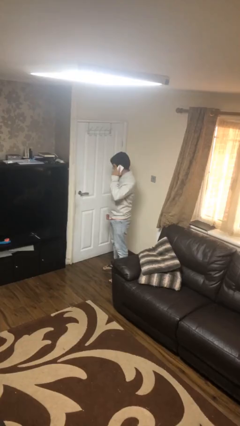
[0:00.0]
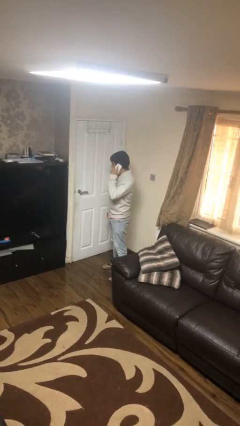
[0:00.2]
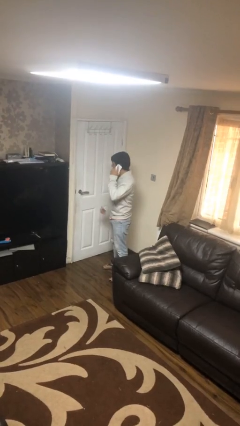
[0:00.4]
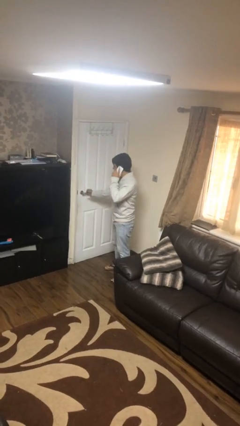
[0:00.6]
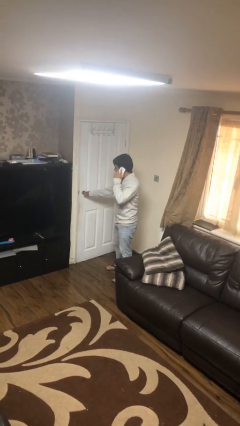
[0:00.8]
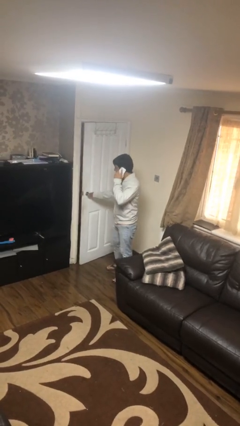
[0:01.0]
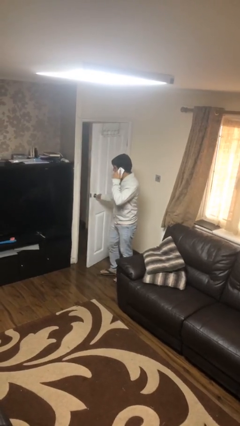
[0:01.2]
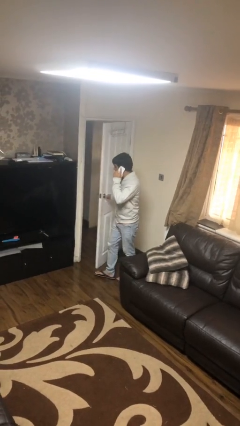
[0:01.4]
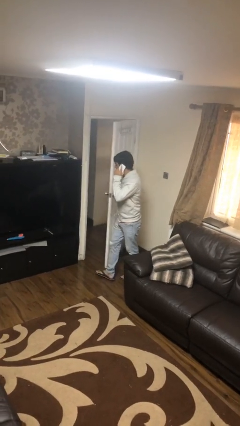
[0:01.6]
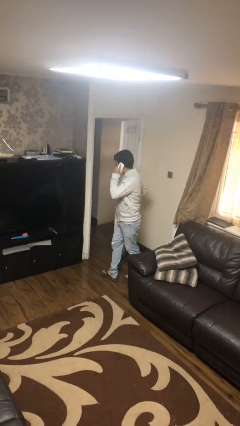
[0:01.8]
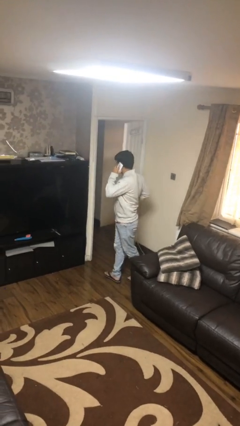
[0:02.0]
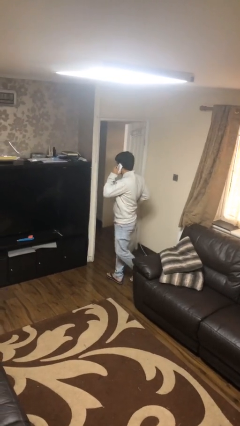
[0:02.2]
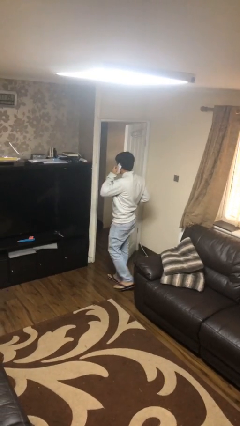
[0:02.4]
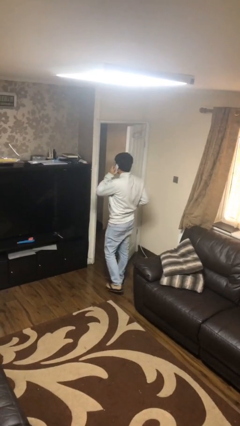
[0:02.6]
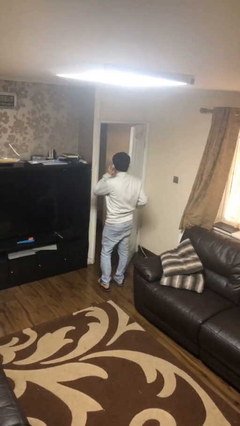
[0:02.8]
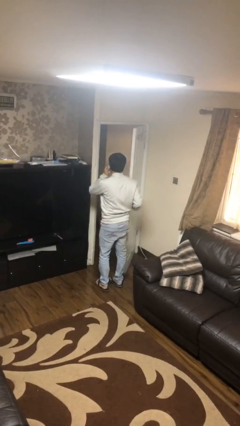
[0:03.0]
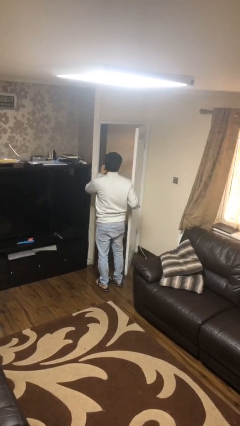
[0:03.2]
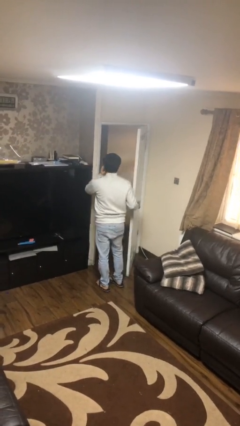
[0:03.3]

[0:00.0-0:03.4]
person opens facility door

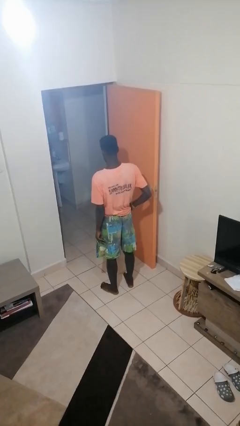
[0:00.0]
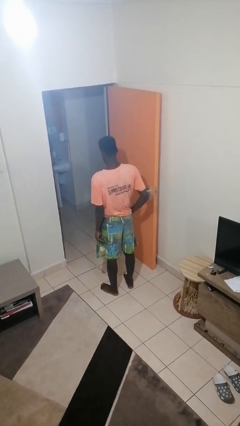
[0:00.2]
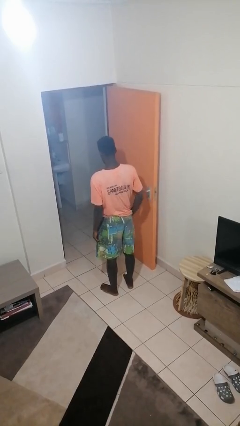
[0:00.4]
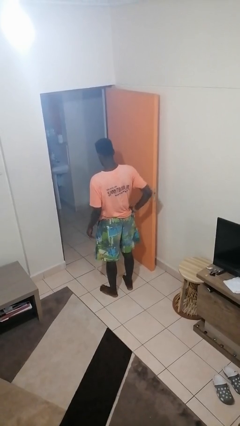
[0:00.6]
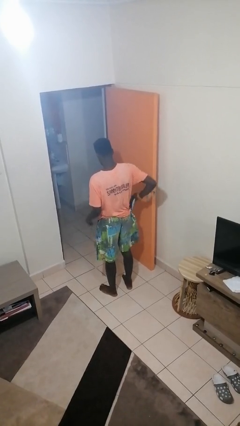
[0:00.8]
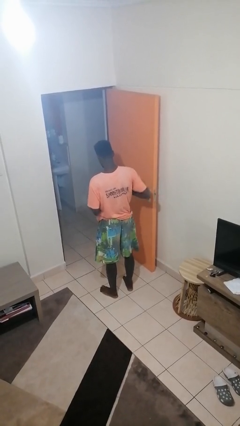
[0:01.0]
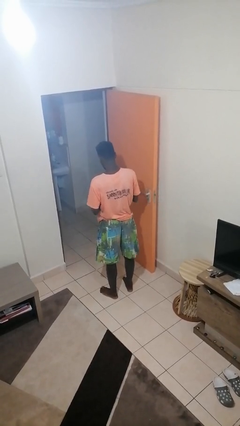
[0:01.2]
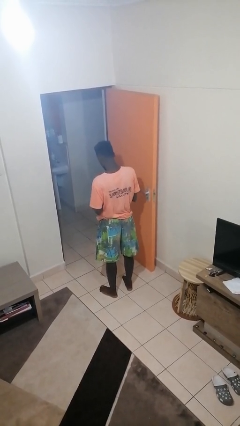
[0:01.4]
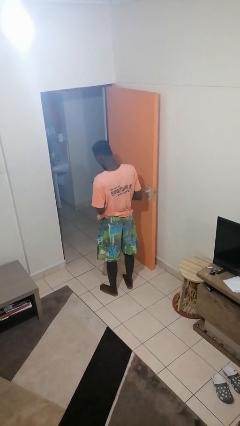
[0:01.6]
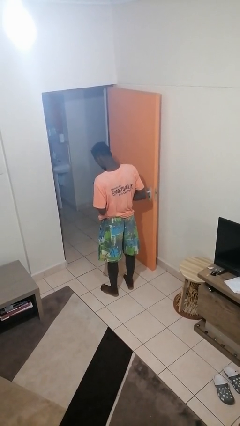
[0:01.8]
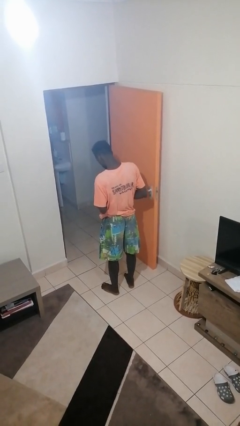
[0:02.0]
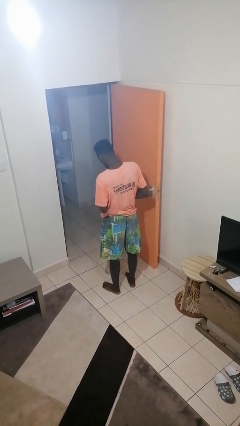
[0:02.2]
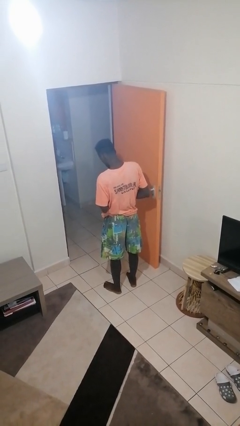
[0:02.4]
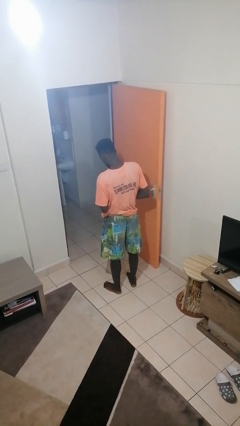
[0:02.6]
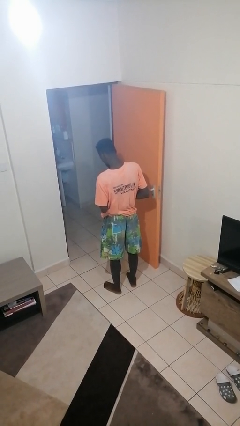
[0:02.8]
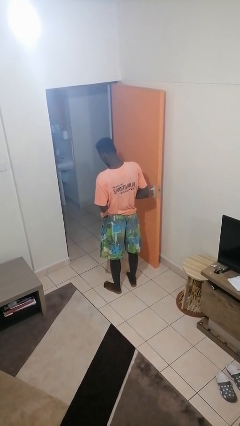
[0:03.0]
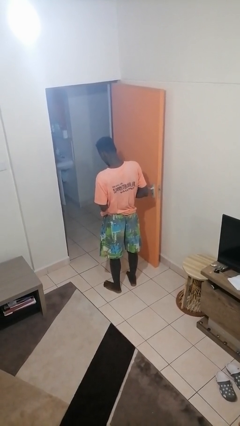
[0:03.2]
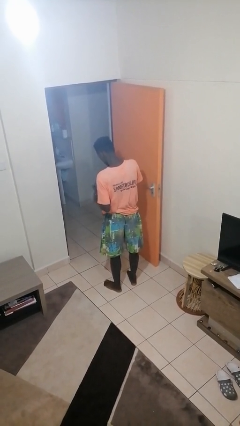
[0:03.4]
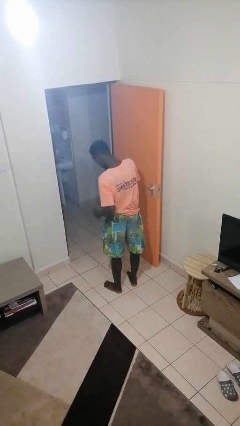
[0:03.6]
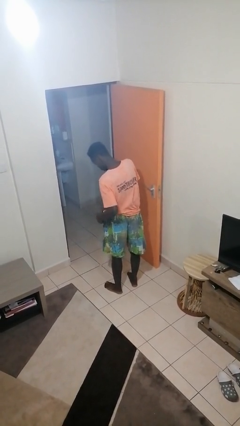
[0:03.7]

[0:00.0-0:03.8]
person takes phone from pocket

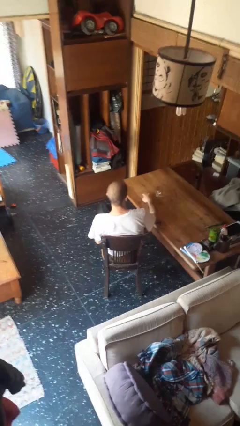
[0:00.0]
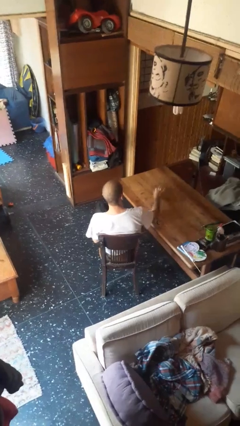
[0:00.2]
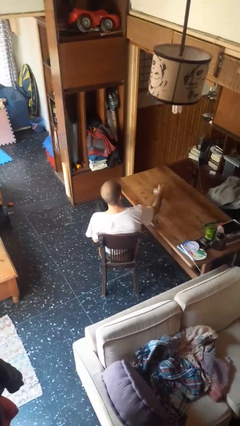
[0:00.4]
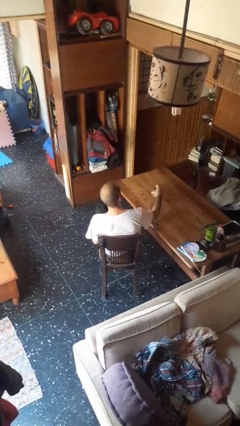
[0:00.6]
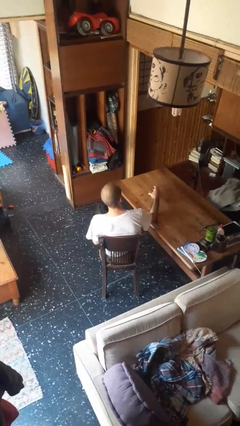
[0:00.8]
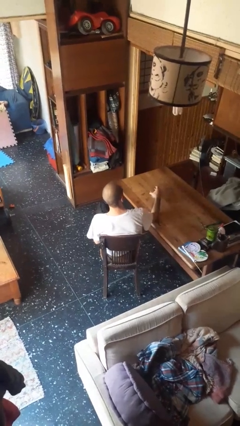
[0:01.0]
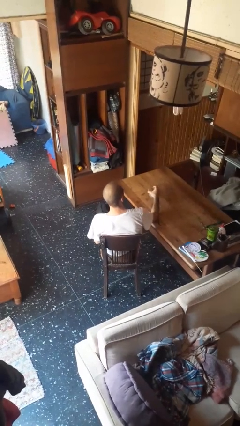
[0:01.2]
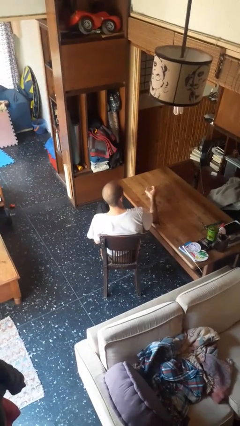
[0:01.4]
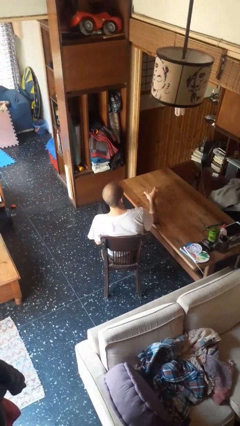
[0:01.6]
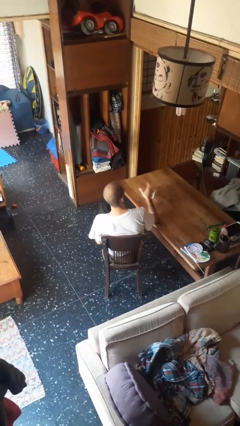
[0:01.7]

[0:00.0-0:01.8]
person sets upright glass

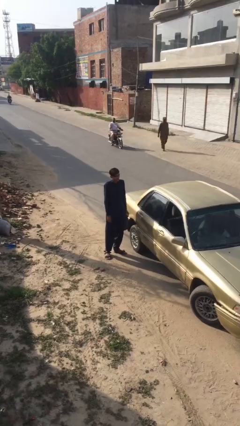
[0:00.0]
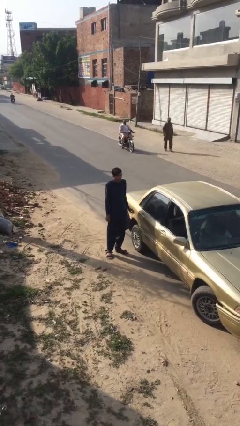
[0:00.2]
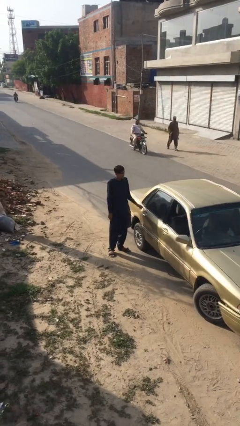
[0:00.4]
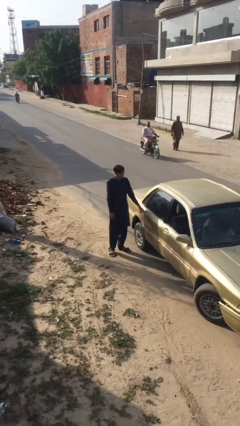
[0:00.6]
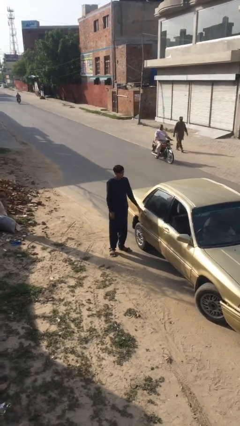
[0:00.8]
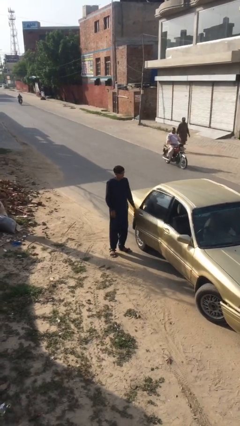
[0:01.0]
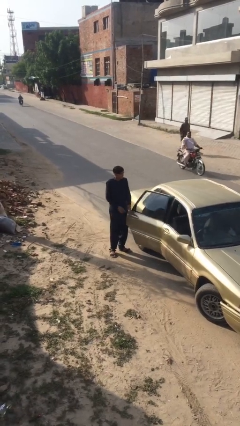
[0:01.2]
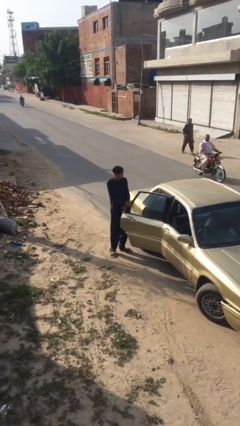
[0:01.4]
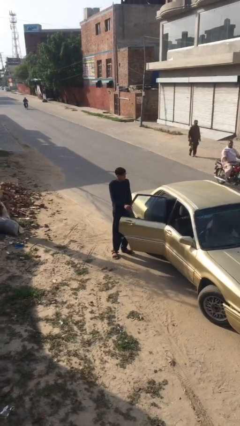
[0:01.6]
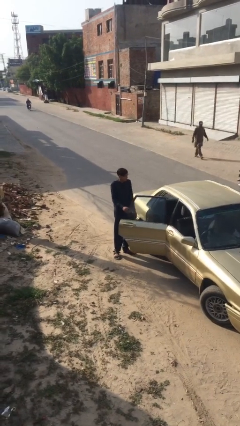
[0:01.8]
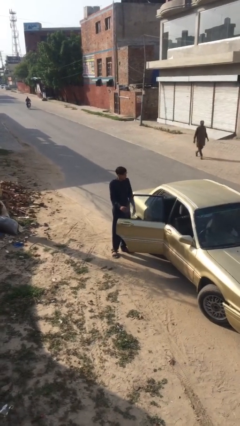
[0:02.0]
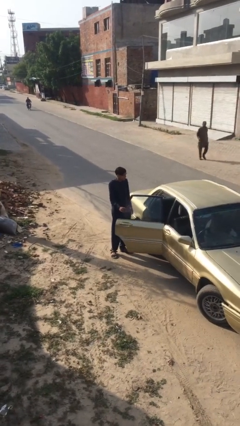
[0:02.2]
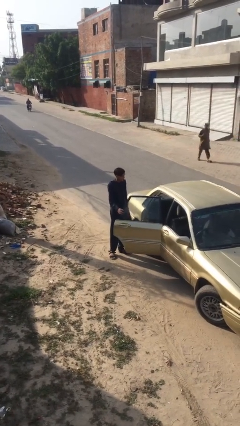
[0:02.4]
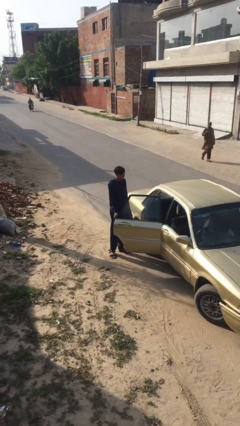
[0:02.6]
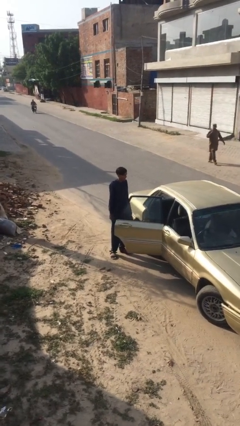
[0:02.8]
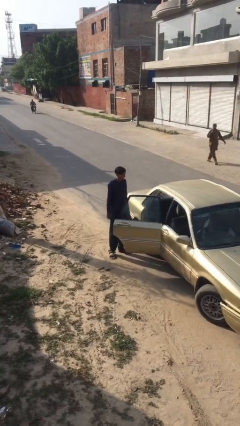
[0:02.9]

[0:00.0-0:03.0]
person opens car door

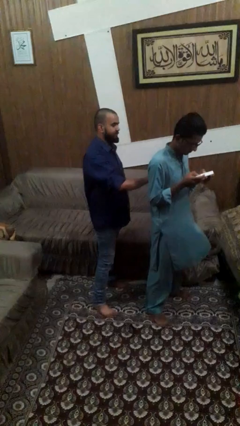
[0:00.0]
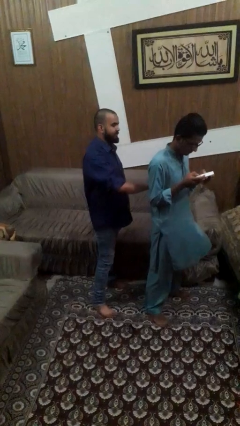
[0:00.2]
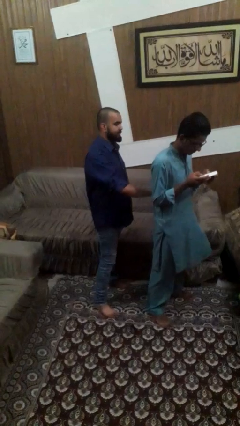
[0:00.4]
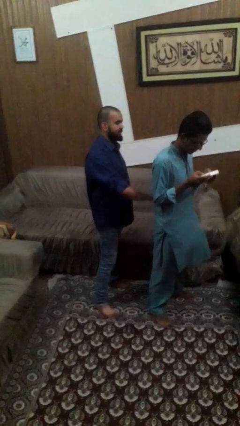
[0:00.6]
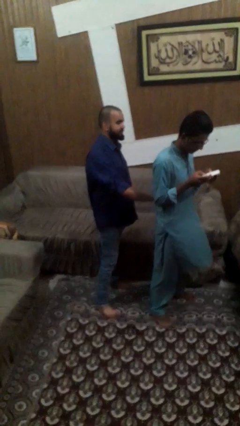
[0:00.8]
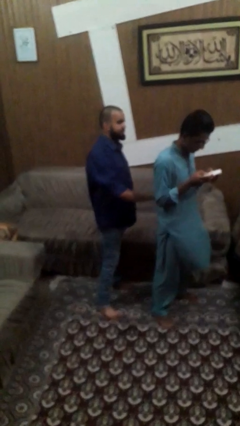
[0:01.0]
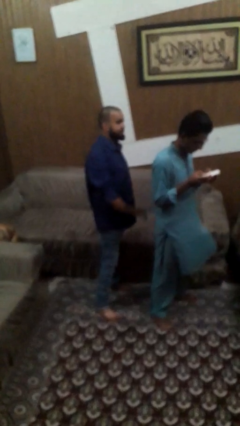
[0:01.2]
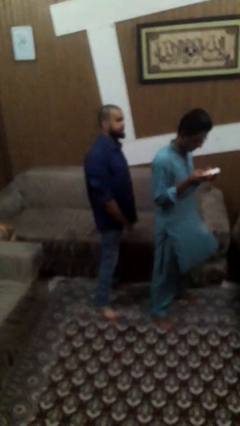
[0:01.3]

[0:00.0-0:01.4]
person touches back of person

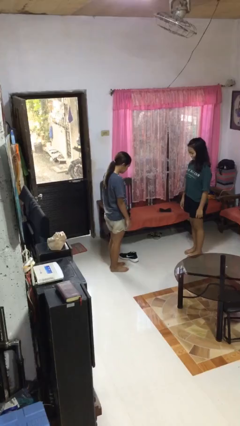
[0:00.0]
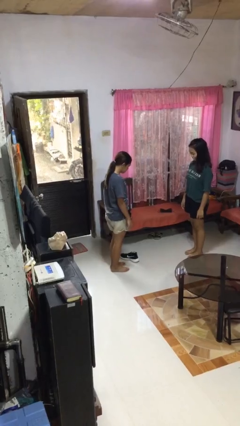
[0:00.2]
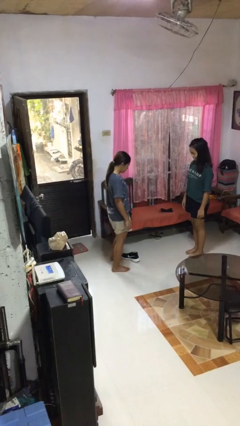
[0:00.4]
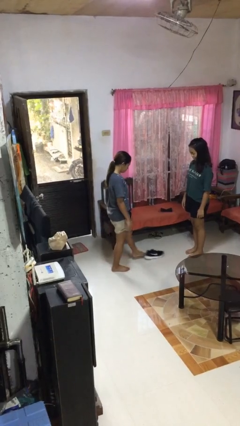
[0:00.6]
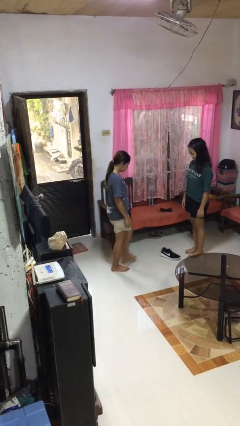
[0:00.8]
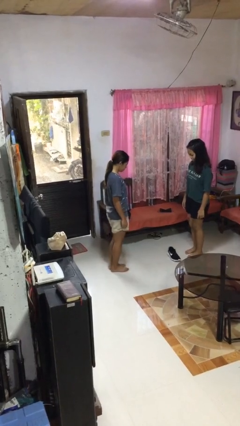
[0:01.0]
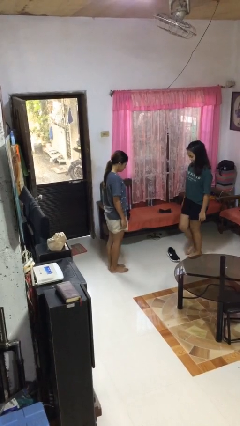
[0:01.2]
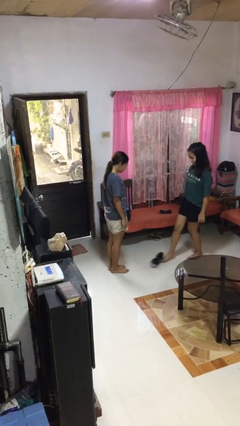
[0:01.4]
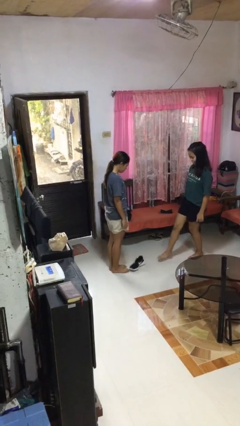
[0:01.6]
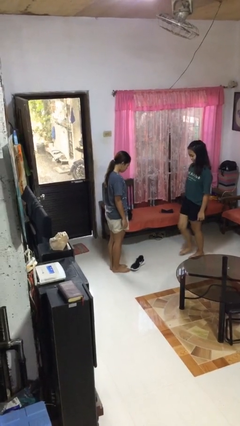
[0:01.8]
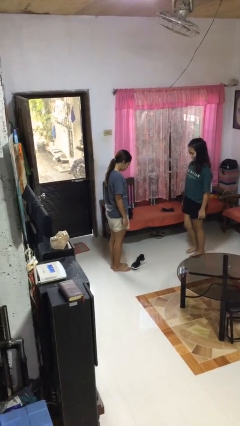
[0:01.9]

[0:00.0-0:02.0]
person kicks object to person

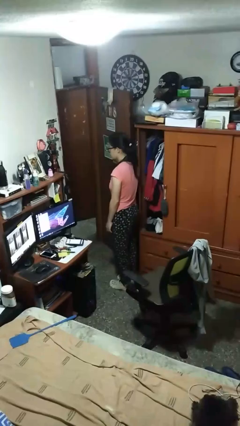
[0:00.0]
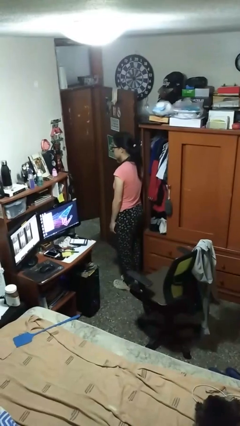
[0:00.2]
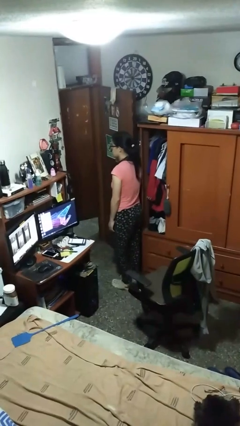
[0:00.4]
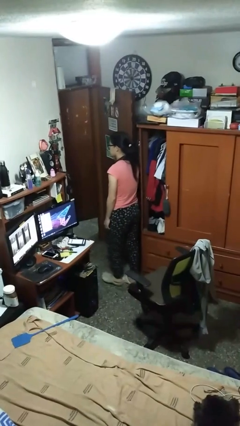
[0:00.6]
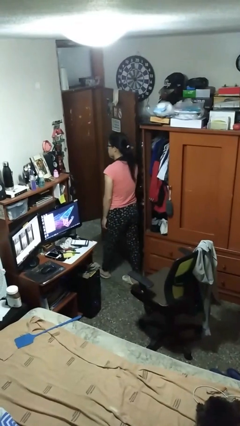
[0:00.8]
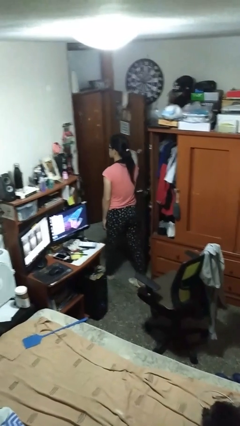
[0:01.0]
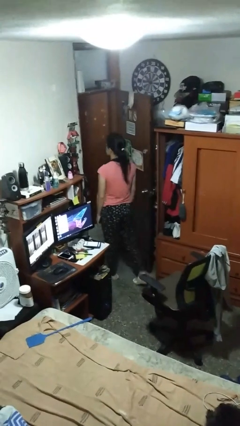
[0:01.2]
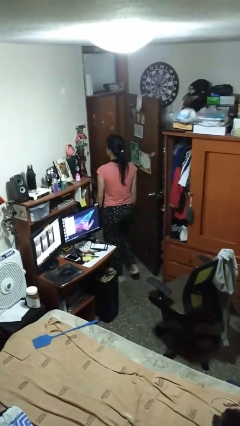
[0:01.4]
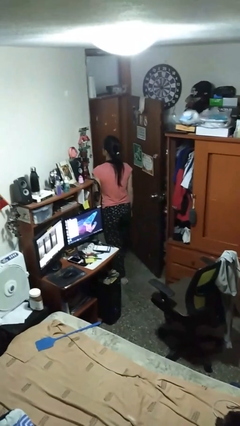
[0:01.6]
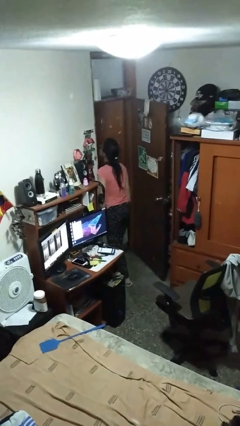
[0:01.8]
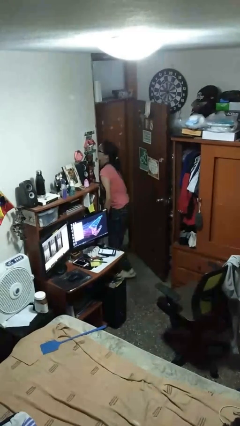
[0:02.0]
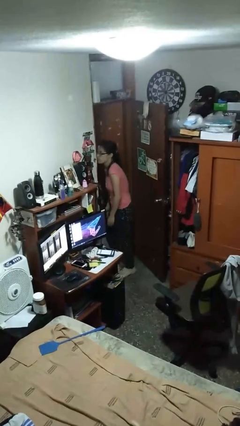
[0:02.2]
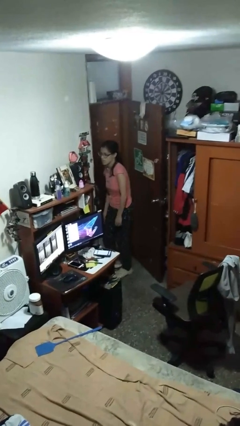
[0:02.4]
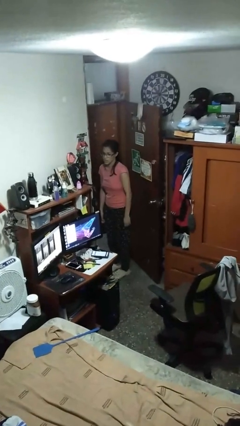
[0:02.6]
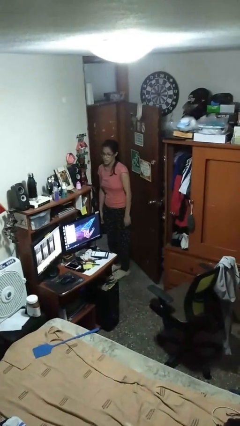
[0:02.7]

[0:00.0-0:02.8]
person bumps into wall
